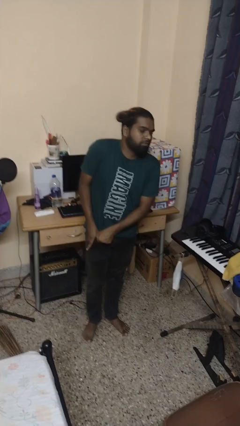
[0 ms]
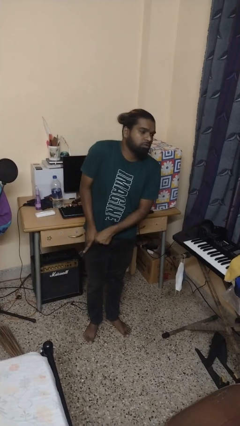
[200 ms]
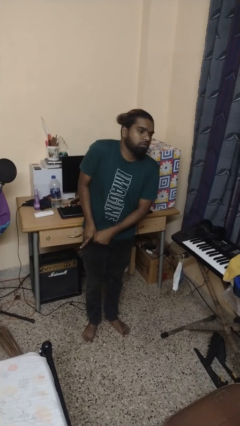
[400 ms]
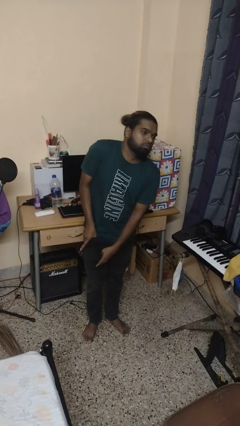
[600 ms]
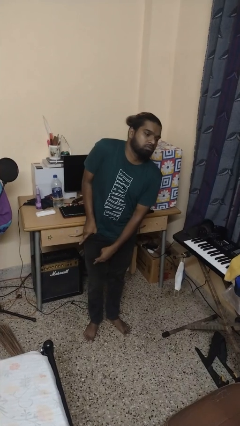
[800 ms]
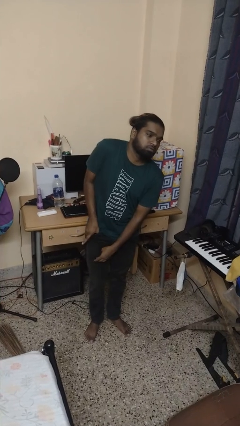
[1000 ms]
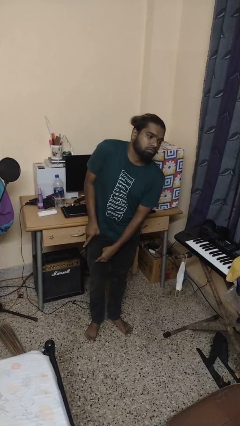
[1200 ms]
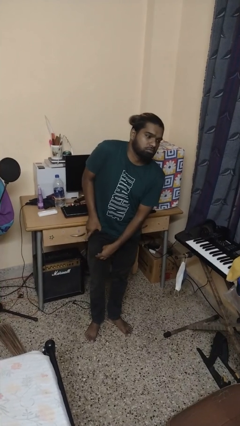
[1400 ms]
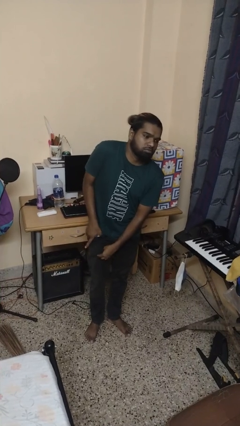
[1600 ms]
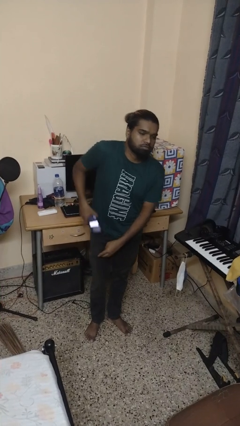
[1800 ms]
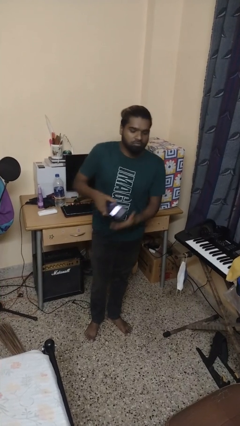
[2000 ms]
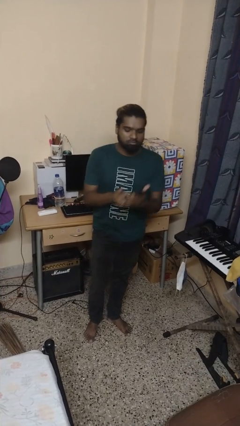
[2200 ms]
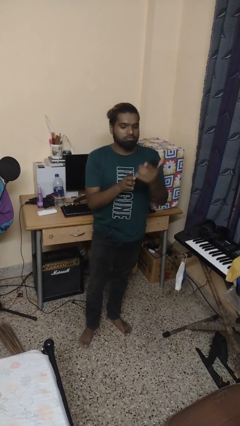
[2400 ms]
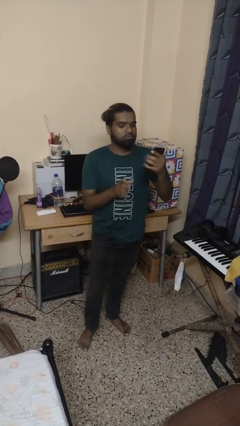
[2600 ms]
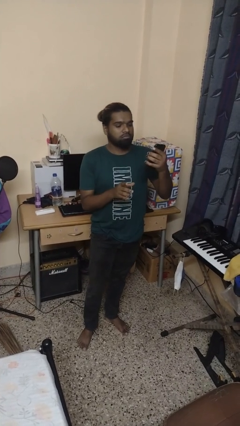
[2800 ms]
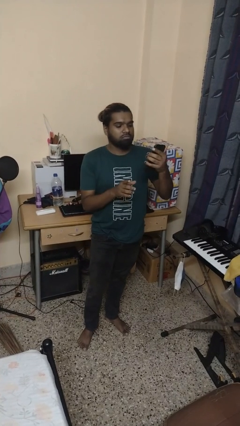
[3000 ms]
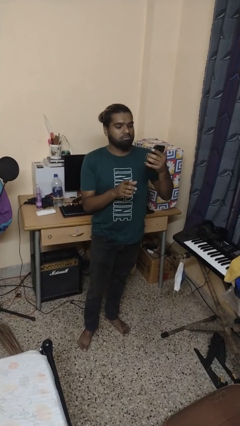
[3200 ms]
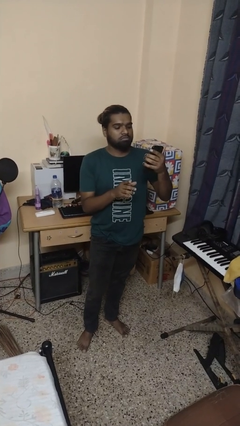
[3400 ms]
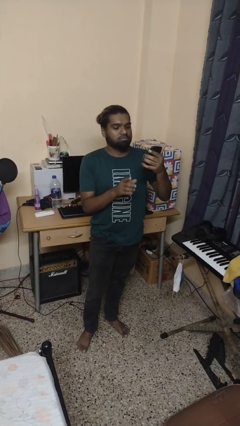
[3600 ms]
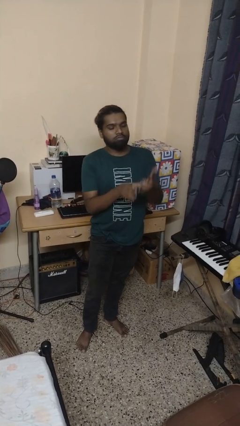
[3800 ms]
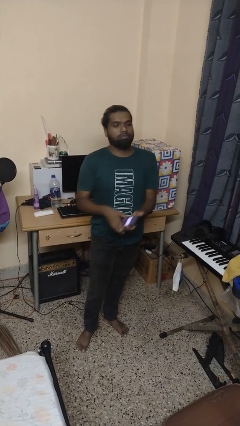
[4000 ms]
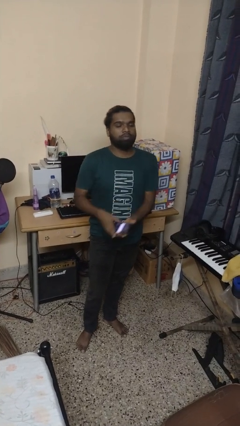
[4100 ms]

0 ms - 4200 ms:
person takes phone from pocket

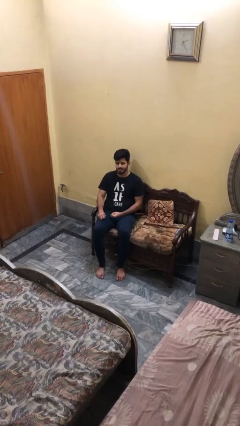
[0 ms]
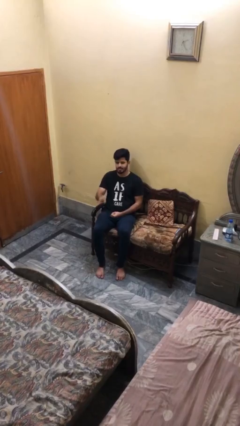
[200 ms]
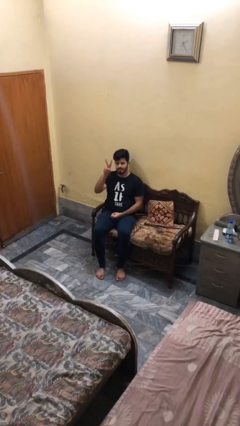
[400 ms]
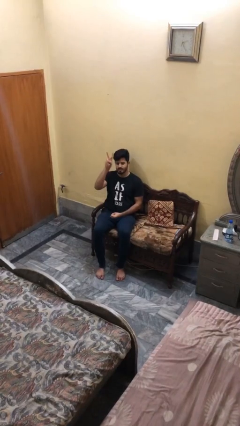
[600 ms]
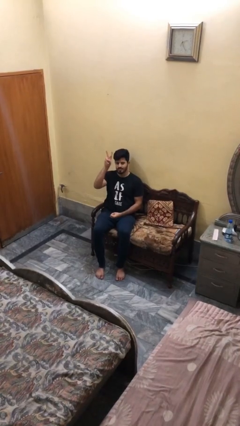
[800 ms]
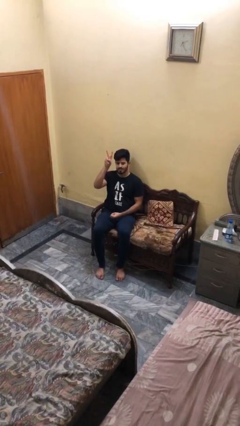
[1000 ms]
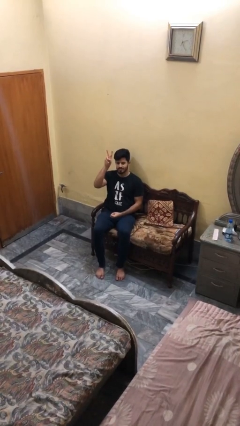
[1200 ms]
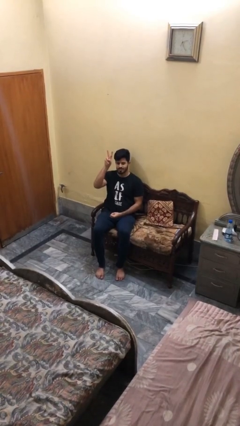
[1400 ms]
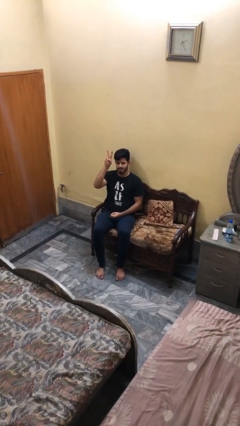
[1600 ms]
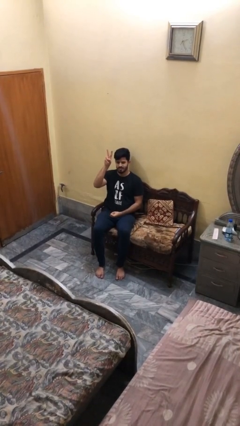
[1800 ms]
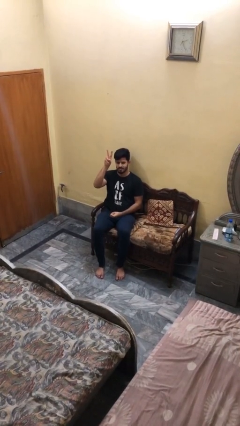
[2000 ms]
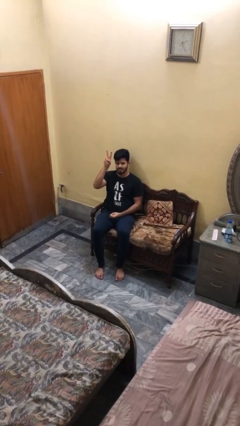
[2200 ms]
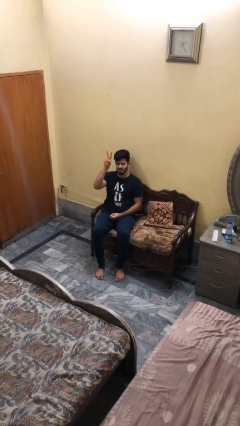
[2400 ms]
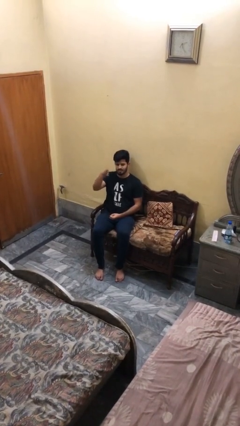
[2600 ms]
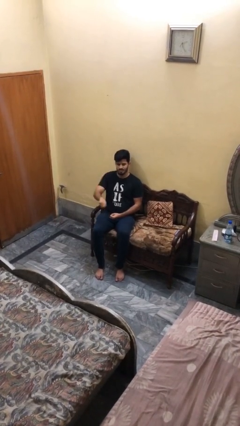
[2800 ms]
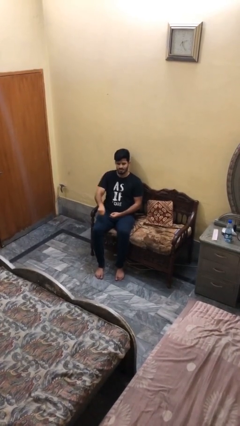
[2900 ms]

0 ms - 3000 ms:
person gestures peace

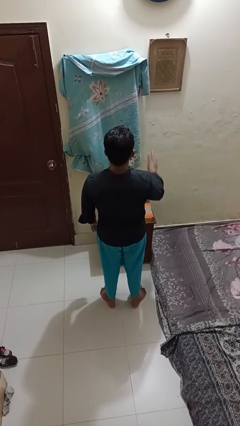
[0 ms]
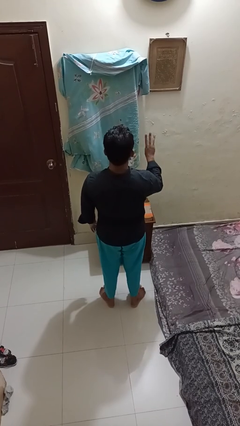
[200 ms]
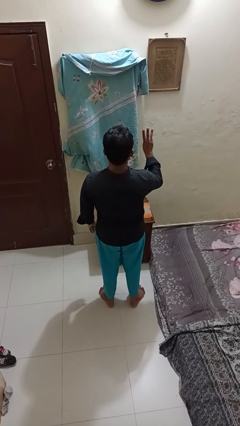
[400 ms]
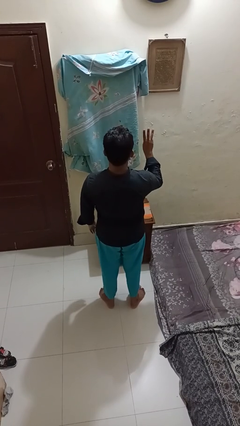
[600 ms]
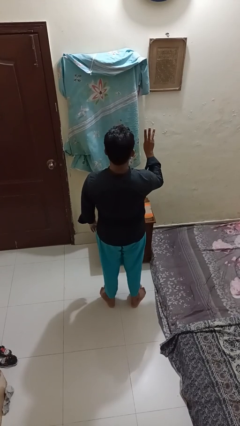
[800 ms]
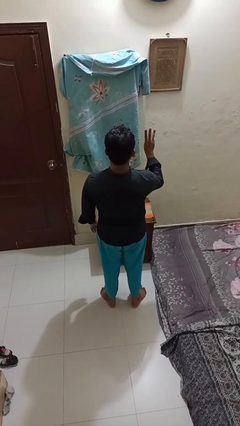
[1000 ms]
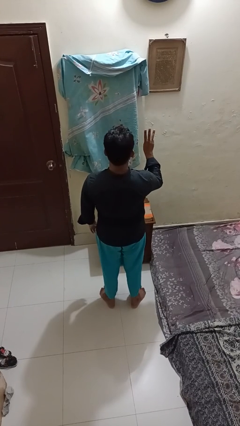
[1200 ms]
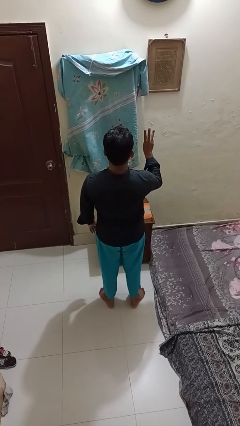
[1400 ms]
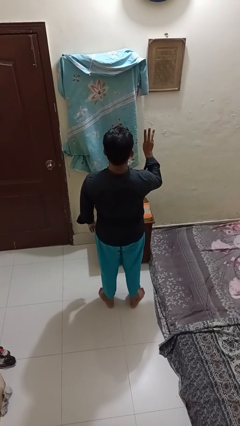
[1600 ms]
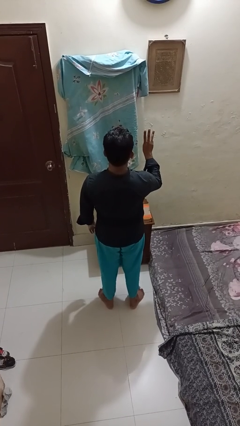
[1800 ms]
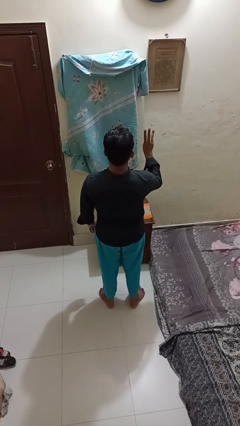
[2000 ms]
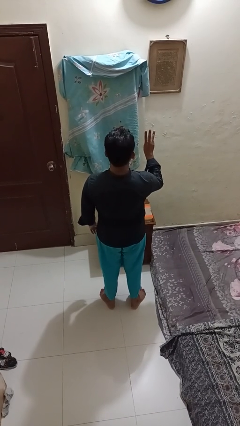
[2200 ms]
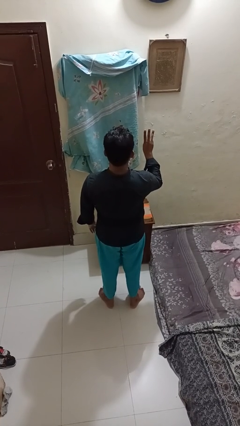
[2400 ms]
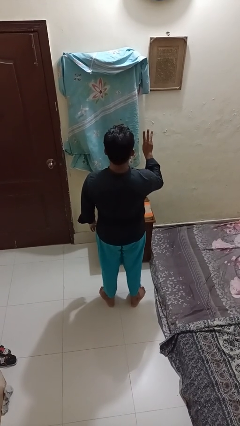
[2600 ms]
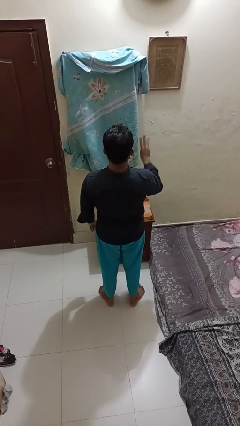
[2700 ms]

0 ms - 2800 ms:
person gestures number three

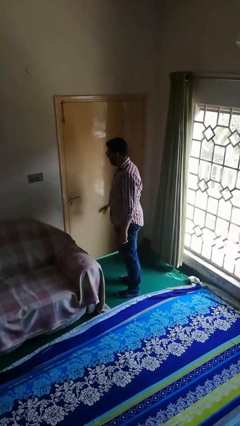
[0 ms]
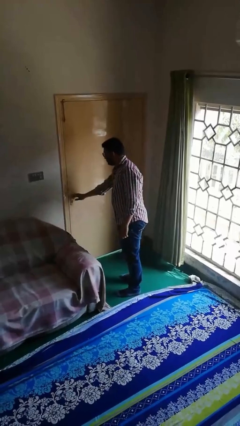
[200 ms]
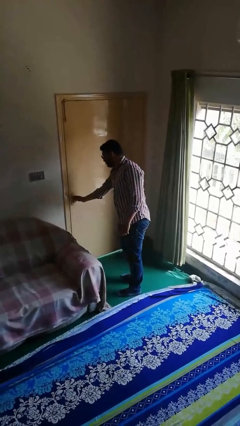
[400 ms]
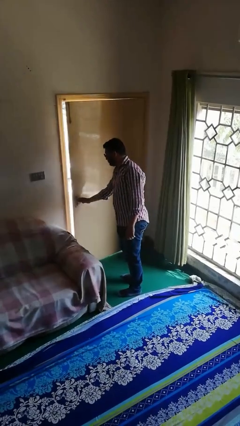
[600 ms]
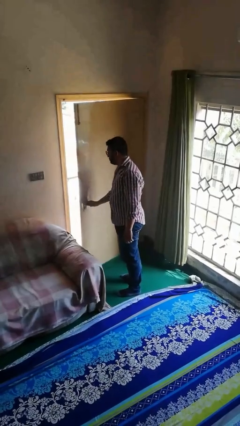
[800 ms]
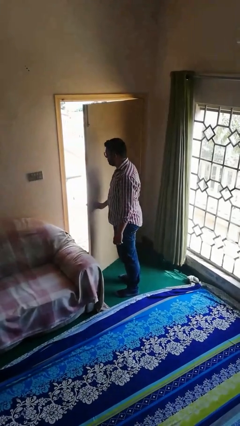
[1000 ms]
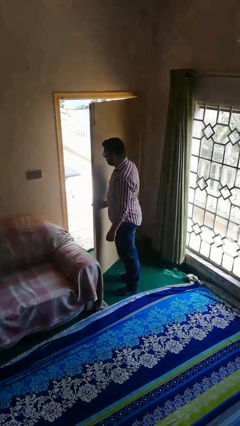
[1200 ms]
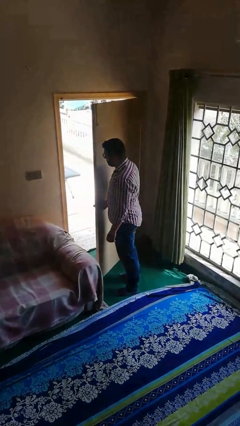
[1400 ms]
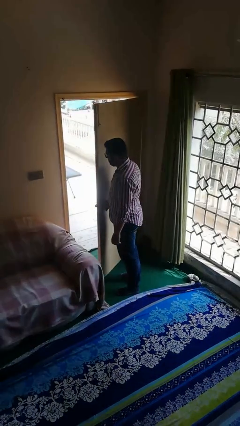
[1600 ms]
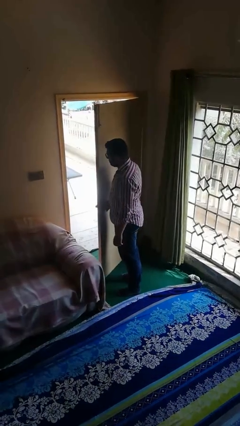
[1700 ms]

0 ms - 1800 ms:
person opens facility door

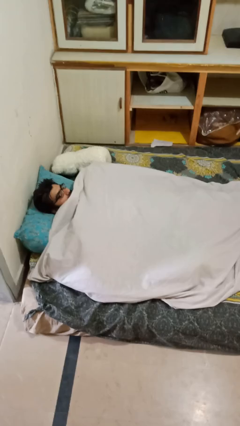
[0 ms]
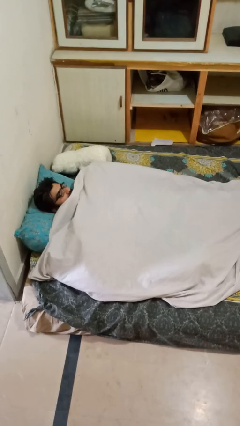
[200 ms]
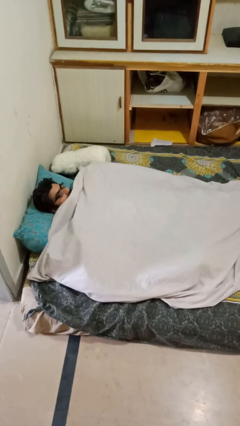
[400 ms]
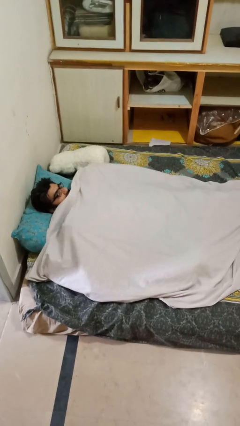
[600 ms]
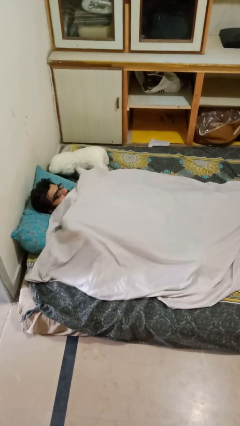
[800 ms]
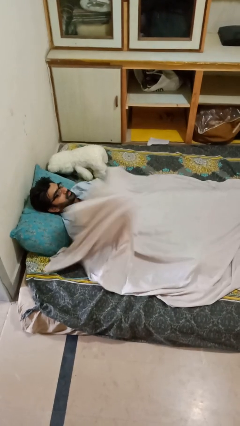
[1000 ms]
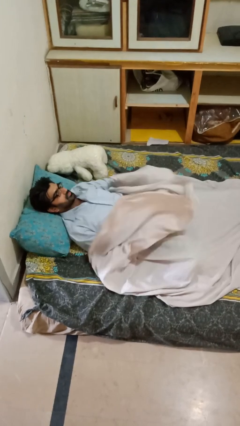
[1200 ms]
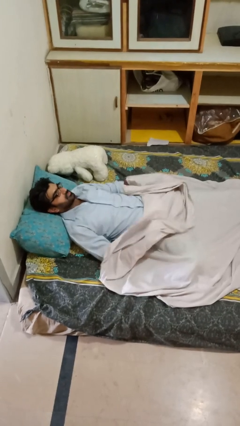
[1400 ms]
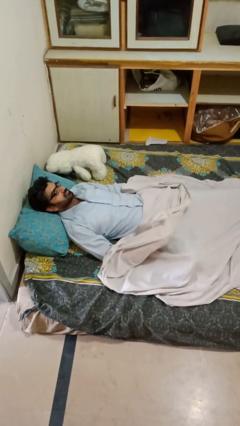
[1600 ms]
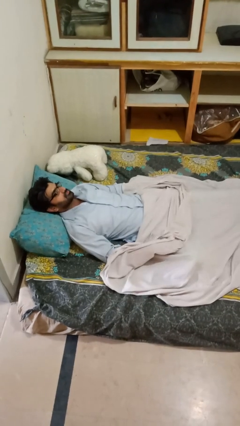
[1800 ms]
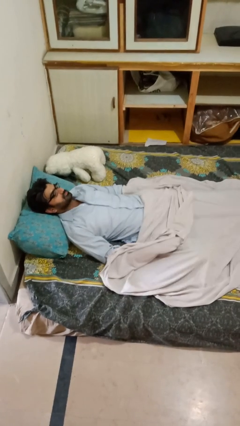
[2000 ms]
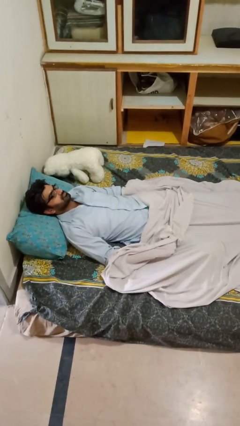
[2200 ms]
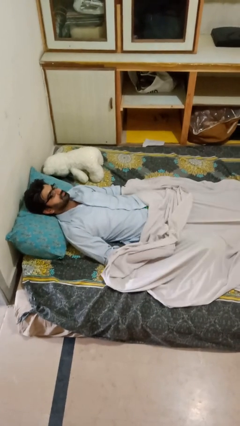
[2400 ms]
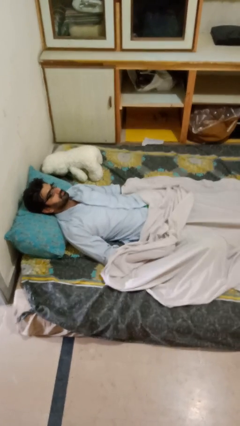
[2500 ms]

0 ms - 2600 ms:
person uncovers with bedsheets

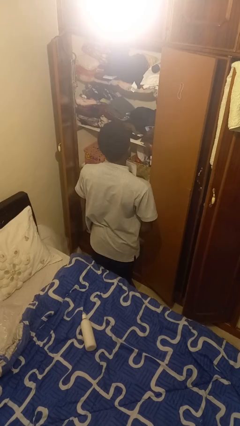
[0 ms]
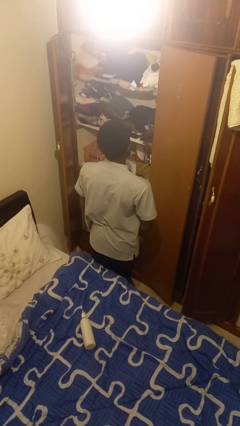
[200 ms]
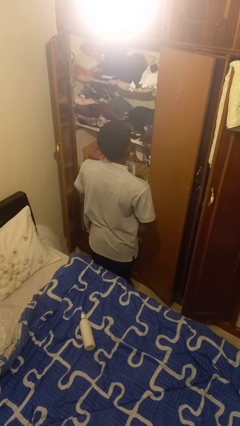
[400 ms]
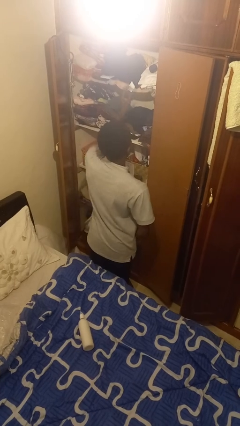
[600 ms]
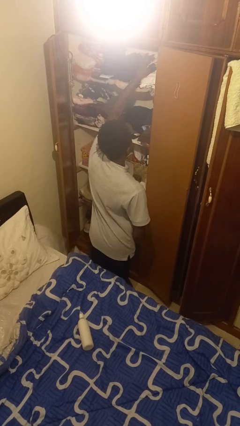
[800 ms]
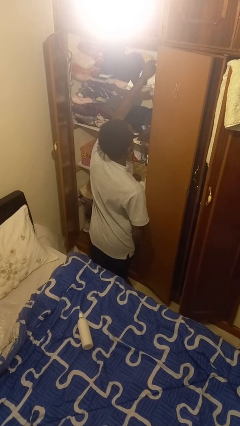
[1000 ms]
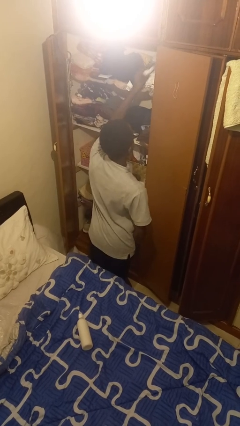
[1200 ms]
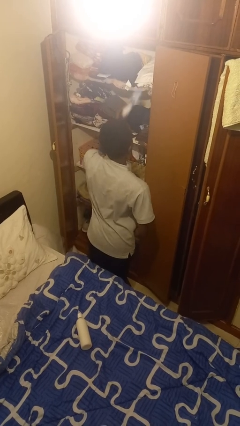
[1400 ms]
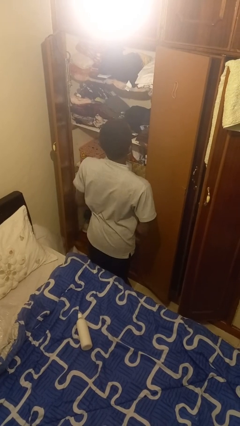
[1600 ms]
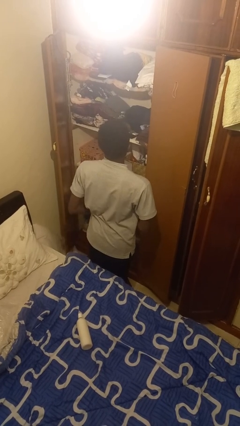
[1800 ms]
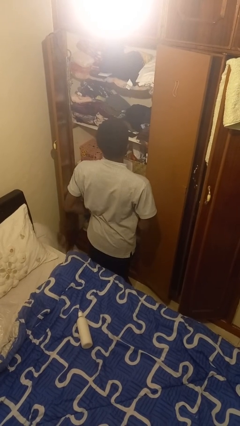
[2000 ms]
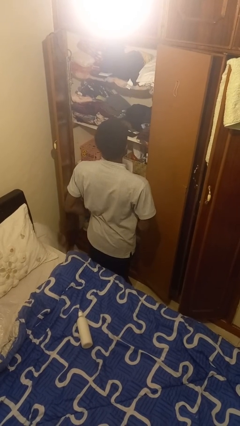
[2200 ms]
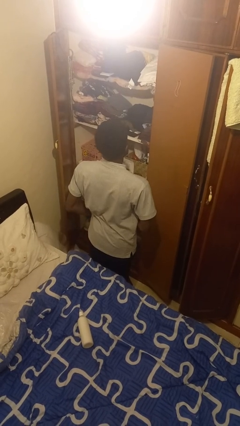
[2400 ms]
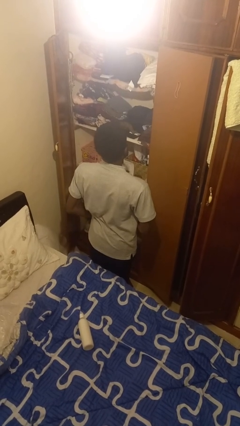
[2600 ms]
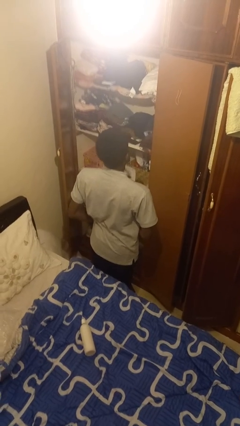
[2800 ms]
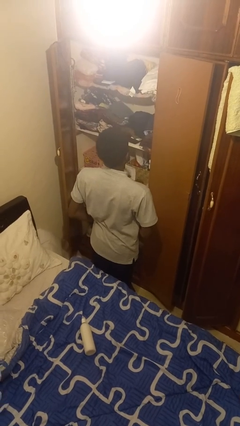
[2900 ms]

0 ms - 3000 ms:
person picks up object from shelf
